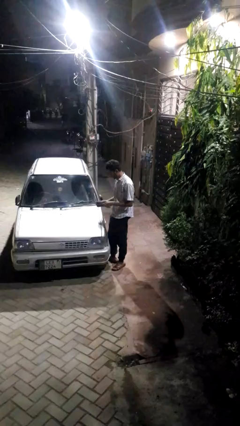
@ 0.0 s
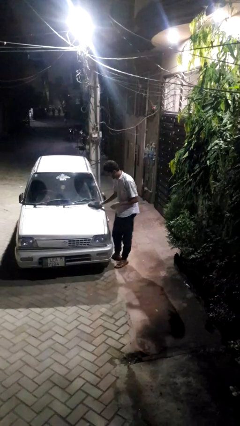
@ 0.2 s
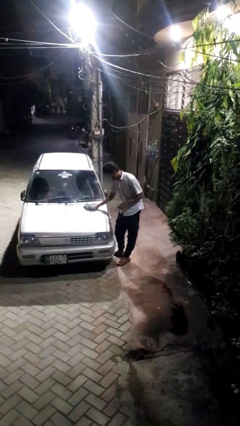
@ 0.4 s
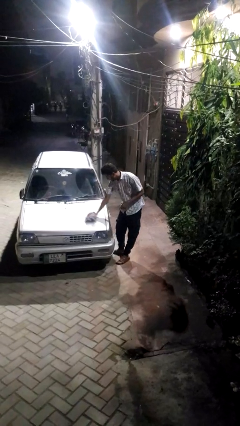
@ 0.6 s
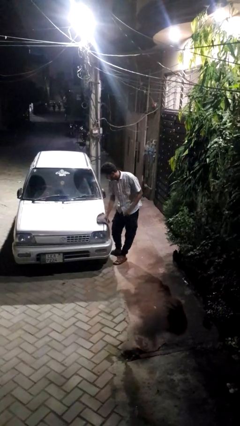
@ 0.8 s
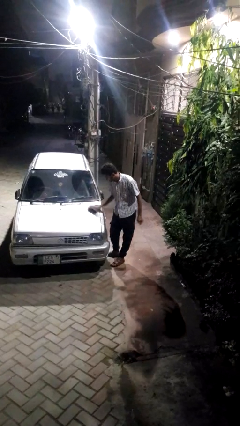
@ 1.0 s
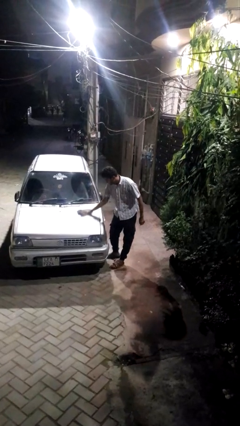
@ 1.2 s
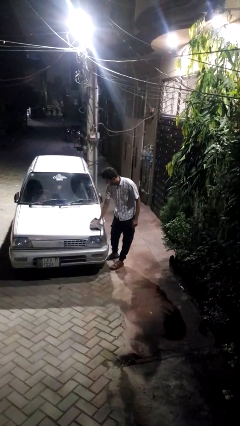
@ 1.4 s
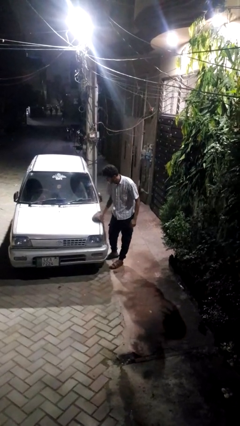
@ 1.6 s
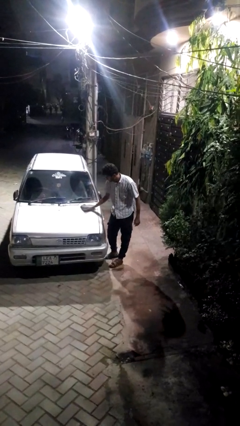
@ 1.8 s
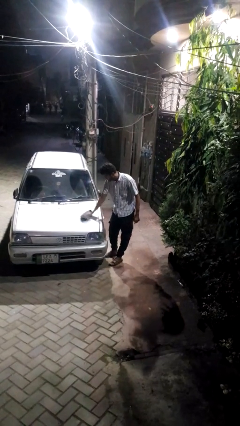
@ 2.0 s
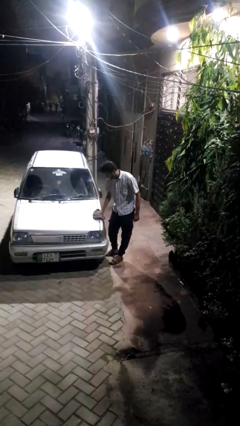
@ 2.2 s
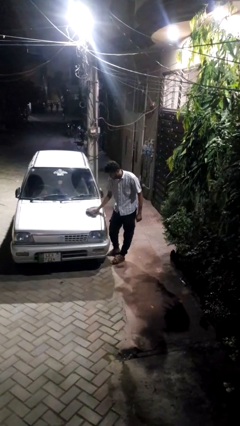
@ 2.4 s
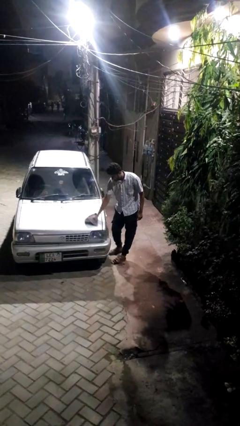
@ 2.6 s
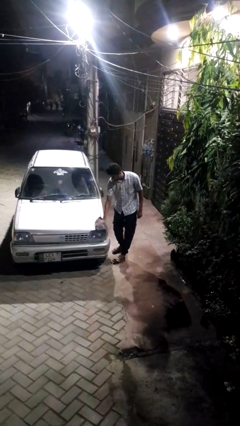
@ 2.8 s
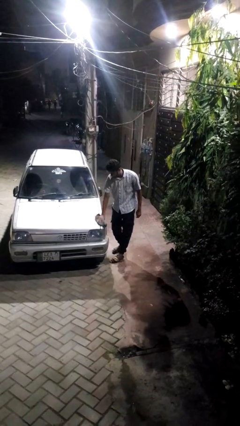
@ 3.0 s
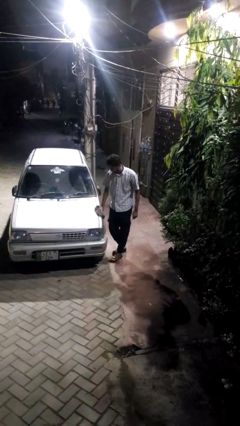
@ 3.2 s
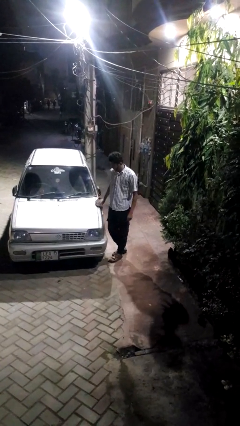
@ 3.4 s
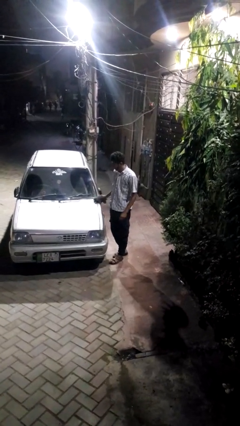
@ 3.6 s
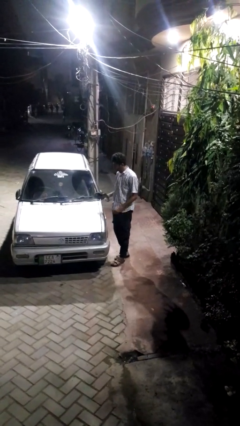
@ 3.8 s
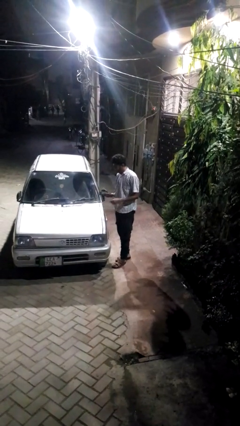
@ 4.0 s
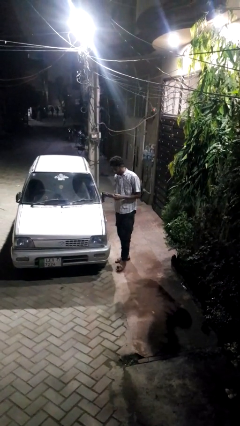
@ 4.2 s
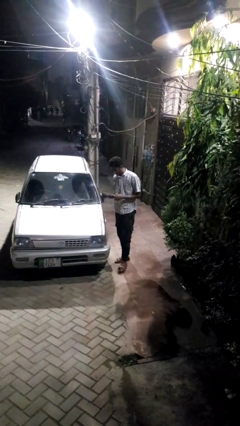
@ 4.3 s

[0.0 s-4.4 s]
person polishes car with rag

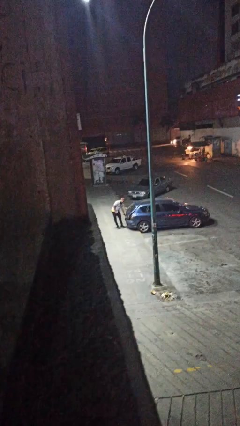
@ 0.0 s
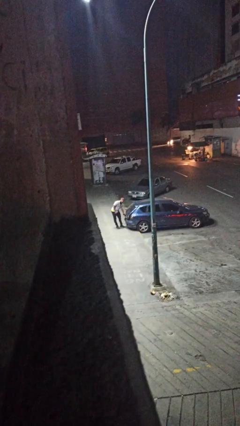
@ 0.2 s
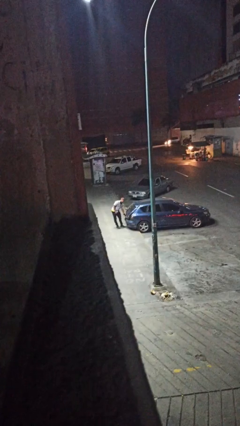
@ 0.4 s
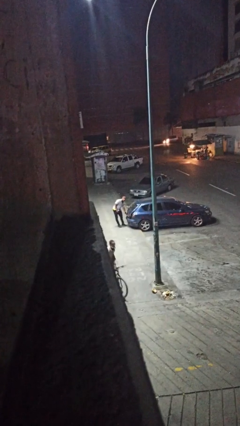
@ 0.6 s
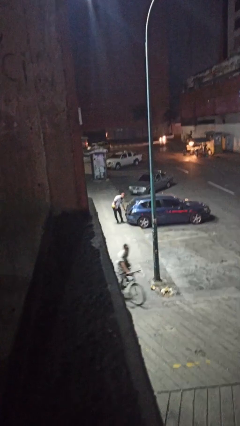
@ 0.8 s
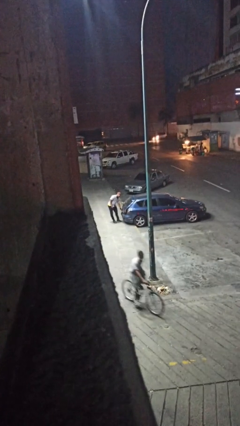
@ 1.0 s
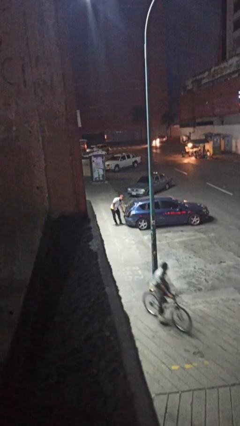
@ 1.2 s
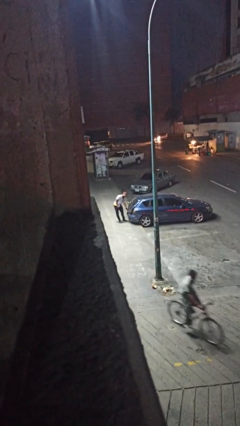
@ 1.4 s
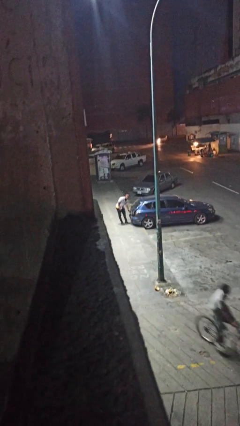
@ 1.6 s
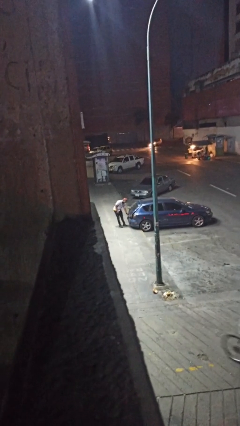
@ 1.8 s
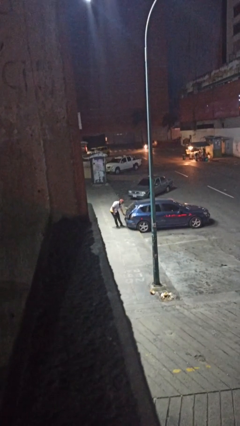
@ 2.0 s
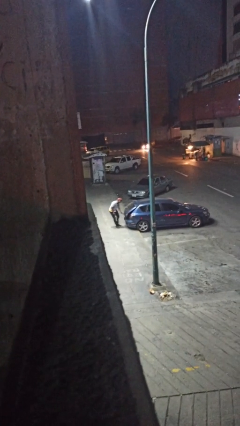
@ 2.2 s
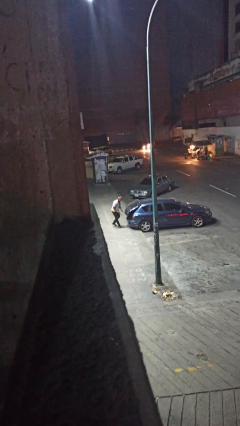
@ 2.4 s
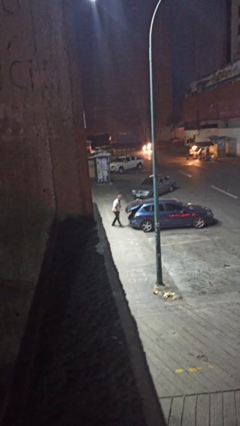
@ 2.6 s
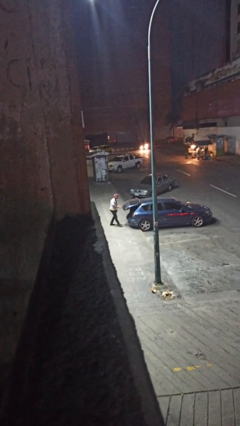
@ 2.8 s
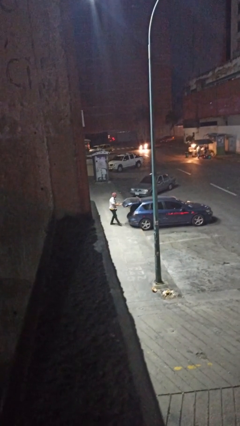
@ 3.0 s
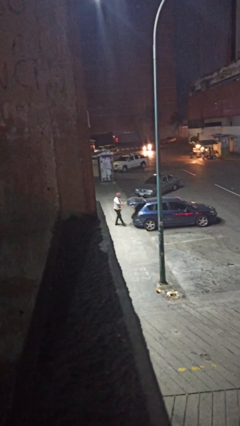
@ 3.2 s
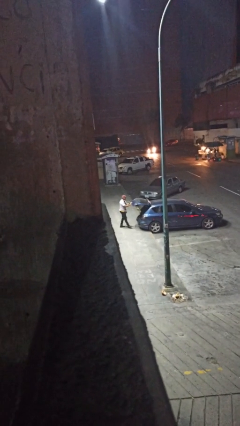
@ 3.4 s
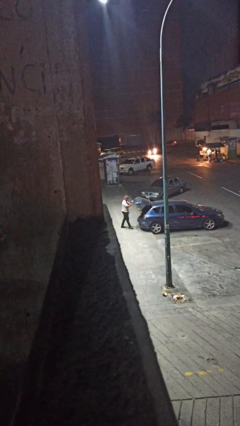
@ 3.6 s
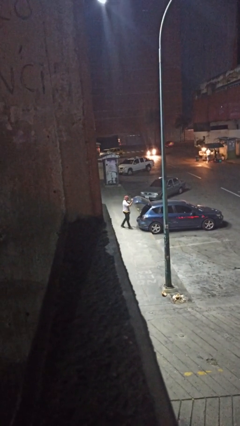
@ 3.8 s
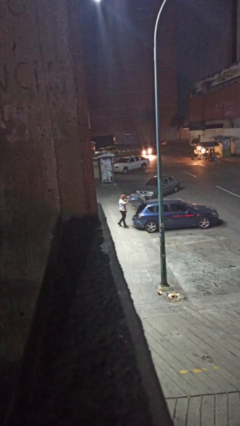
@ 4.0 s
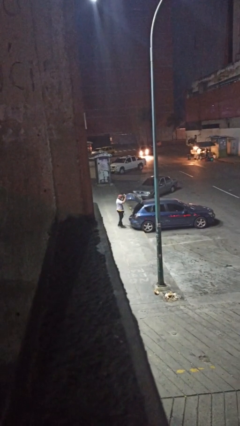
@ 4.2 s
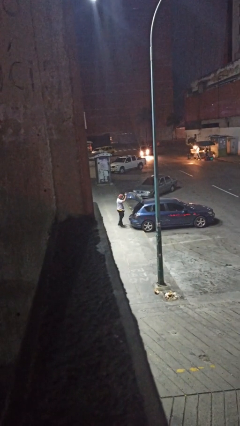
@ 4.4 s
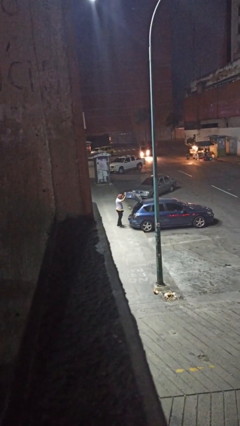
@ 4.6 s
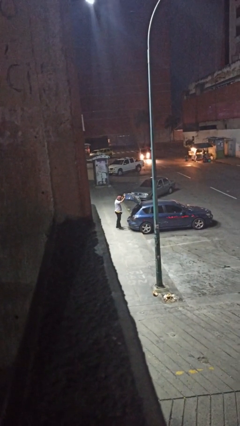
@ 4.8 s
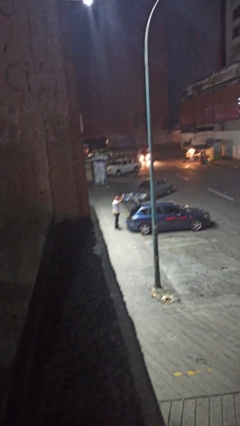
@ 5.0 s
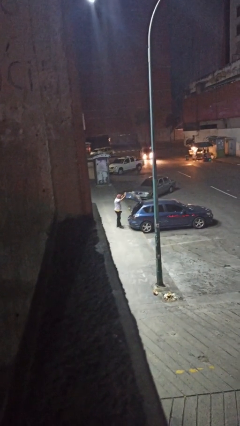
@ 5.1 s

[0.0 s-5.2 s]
person opens car trunk

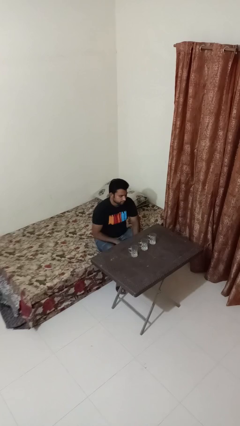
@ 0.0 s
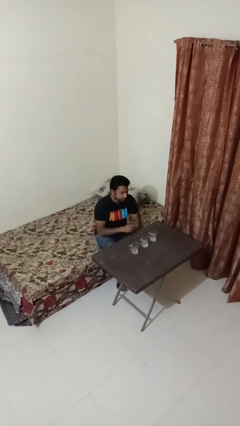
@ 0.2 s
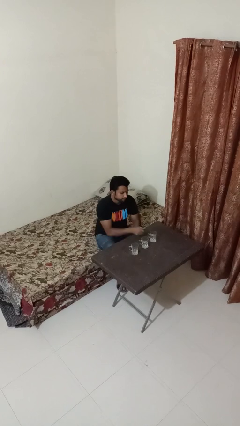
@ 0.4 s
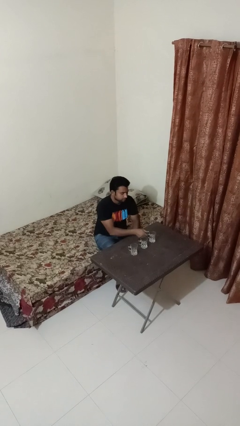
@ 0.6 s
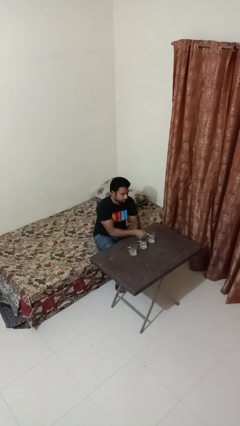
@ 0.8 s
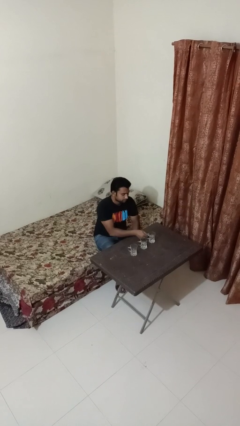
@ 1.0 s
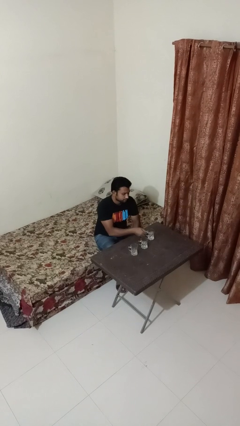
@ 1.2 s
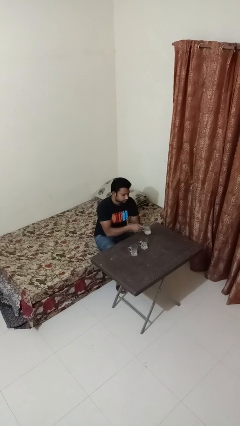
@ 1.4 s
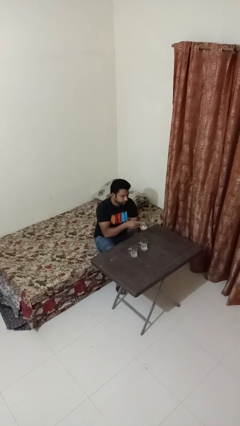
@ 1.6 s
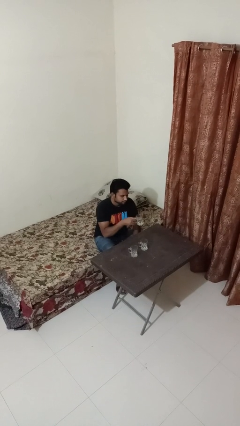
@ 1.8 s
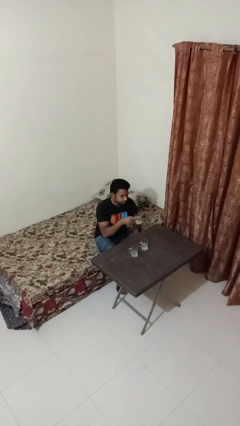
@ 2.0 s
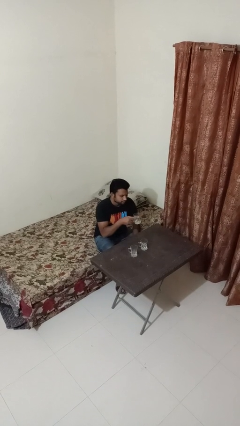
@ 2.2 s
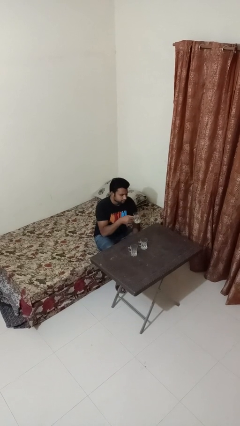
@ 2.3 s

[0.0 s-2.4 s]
person picks up object from table

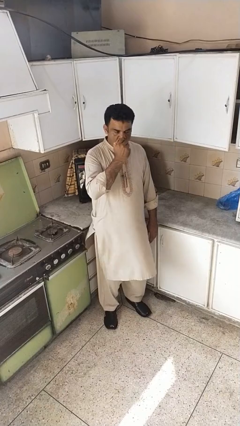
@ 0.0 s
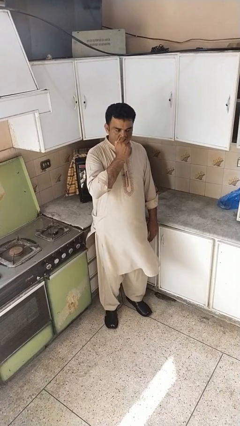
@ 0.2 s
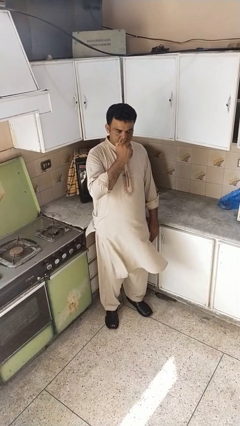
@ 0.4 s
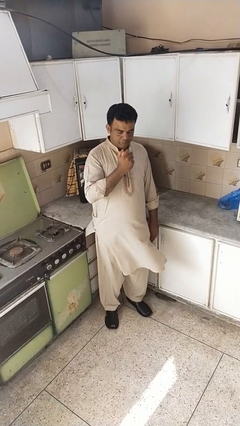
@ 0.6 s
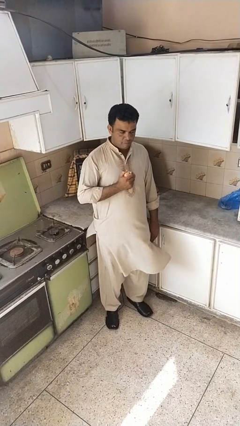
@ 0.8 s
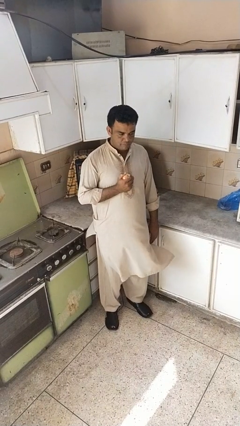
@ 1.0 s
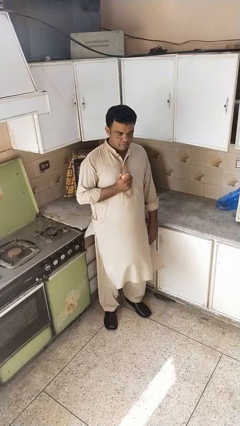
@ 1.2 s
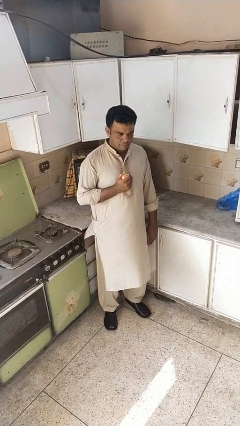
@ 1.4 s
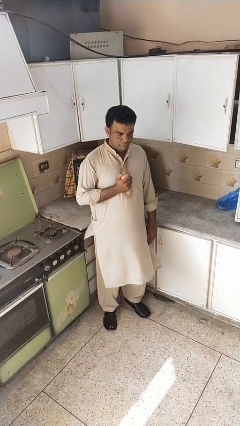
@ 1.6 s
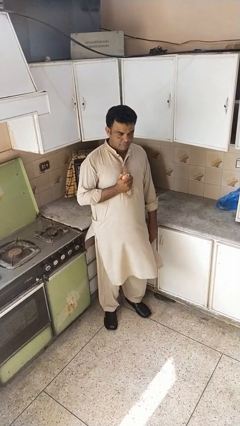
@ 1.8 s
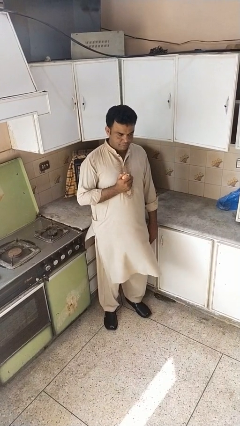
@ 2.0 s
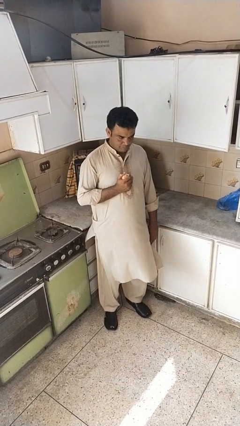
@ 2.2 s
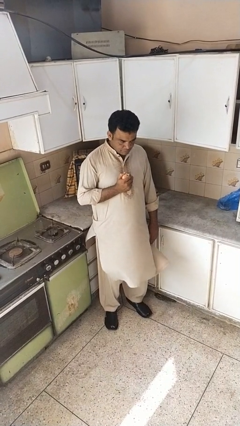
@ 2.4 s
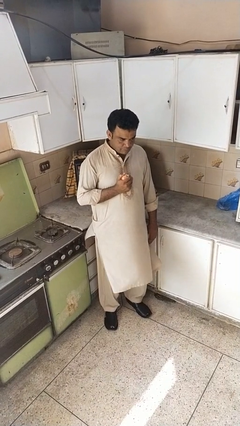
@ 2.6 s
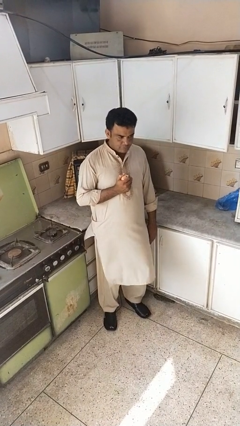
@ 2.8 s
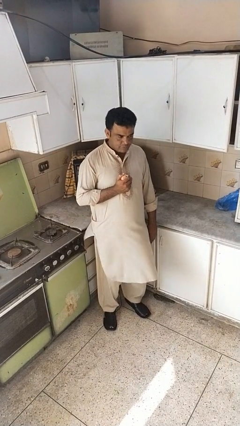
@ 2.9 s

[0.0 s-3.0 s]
person eats apple

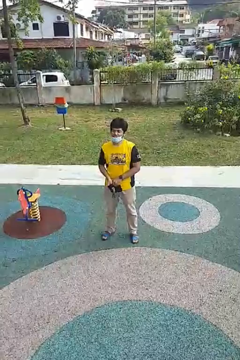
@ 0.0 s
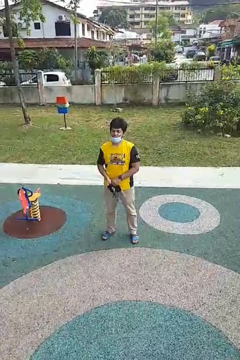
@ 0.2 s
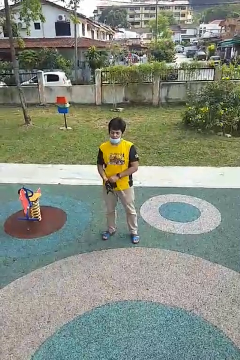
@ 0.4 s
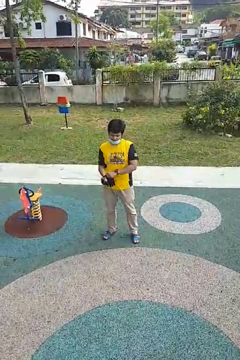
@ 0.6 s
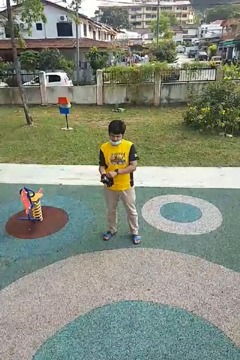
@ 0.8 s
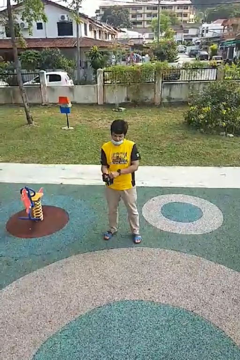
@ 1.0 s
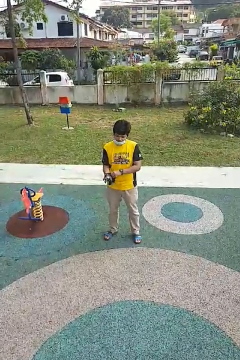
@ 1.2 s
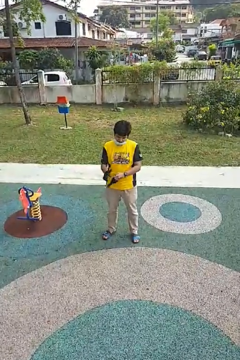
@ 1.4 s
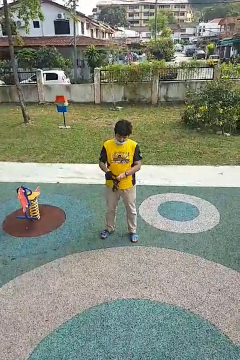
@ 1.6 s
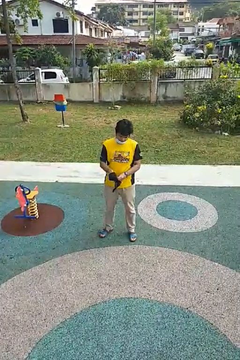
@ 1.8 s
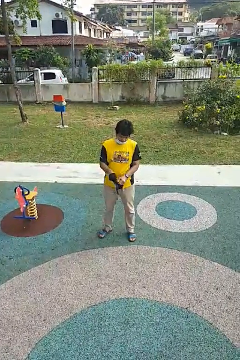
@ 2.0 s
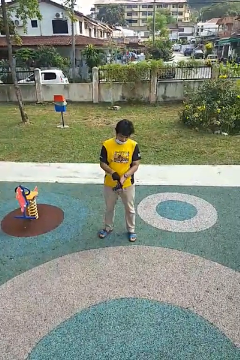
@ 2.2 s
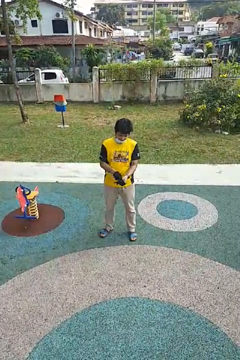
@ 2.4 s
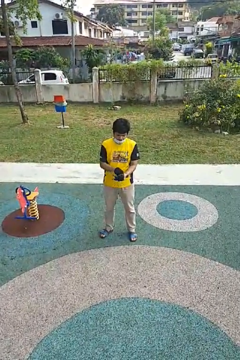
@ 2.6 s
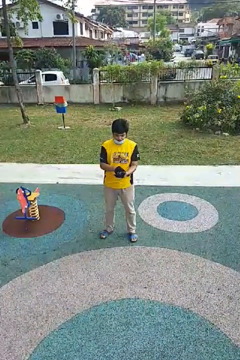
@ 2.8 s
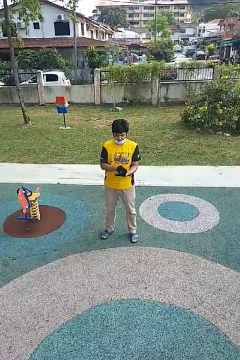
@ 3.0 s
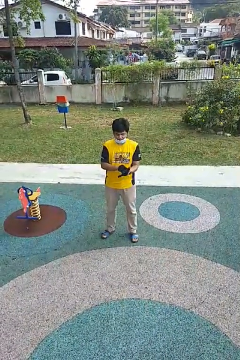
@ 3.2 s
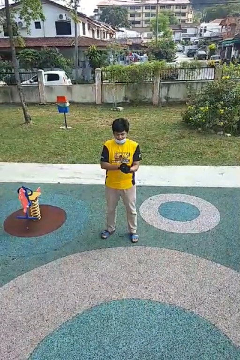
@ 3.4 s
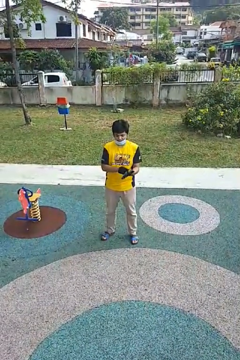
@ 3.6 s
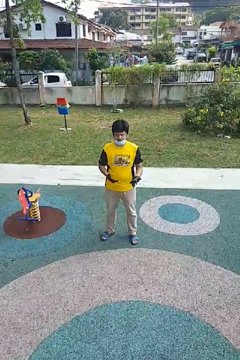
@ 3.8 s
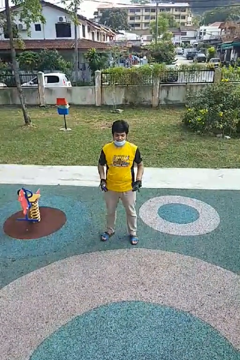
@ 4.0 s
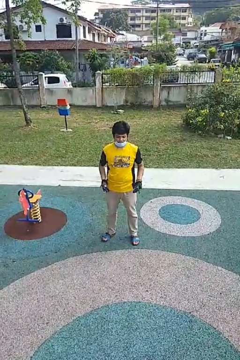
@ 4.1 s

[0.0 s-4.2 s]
person puts on gloves
